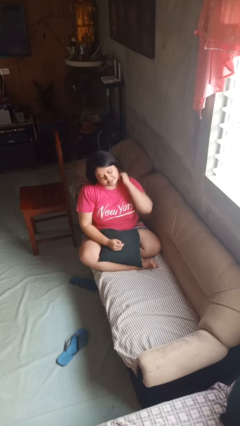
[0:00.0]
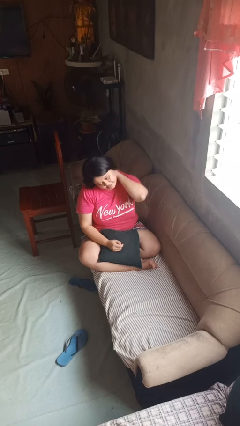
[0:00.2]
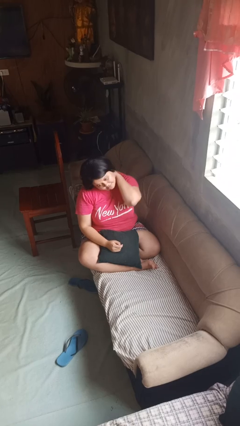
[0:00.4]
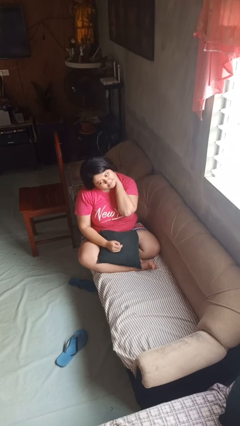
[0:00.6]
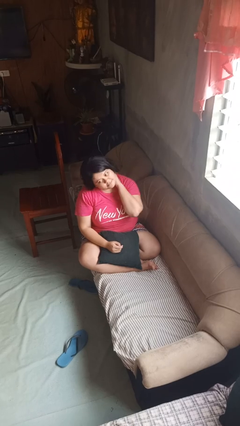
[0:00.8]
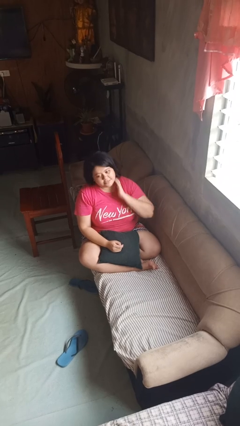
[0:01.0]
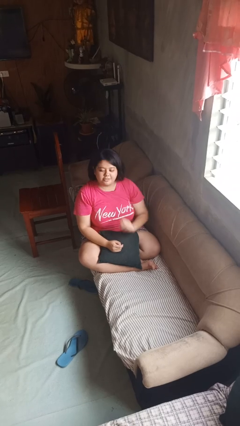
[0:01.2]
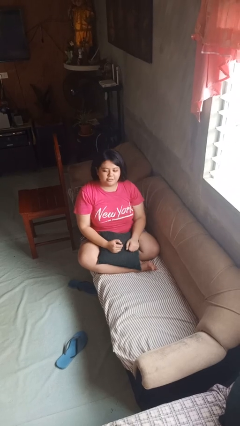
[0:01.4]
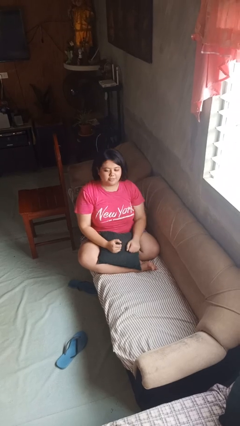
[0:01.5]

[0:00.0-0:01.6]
person rubs neck

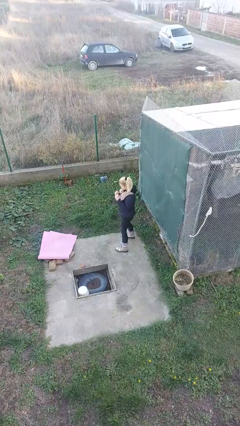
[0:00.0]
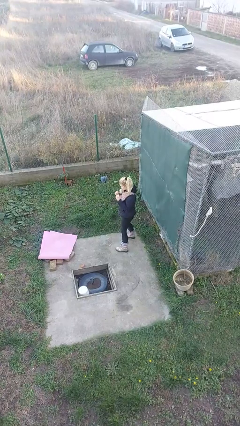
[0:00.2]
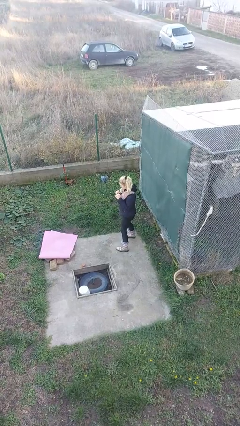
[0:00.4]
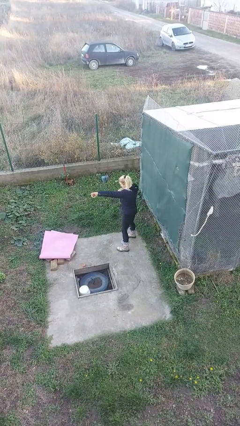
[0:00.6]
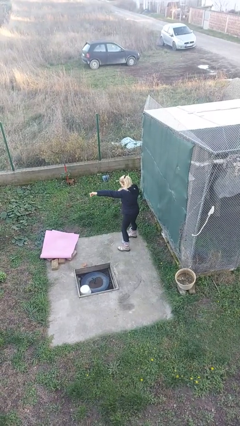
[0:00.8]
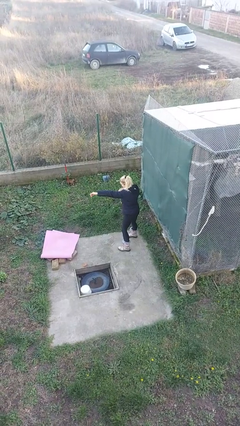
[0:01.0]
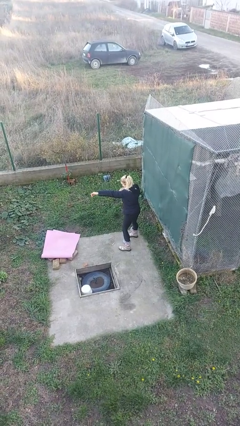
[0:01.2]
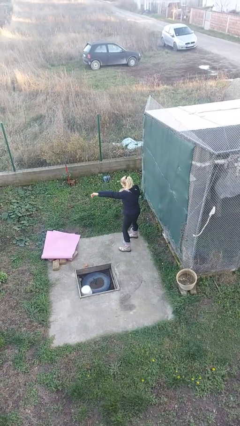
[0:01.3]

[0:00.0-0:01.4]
person punches

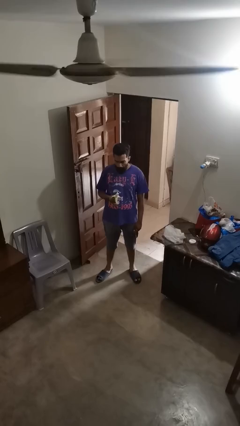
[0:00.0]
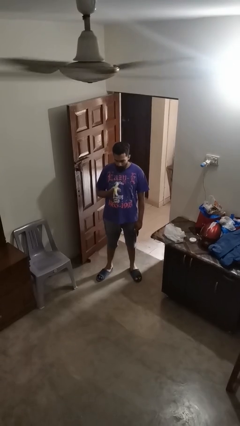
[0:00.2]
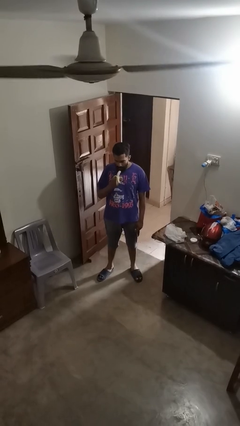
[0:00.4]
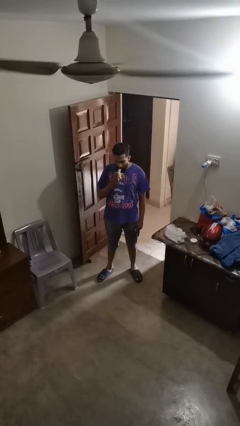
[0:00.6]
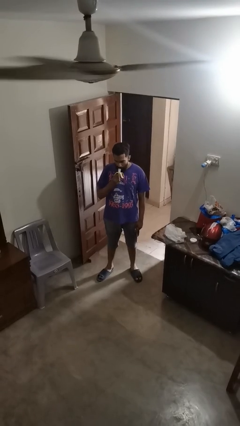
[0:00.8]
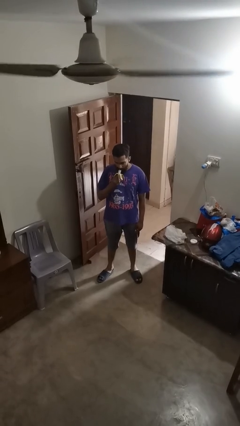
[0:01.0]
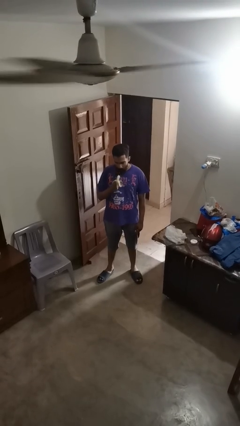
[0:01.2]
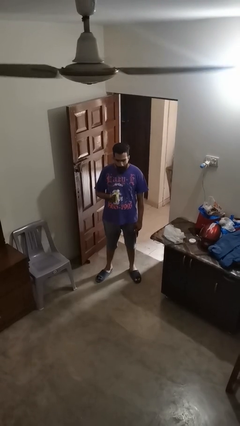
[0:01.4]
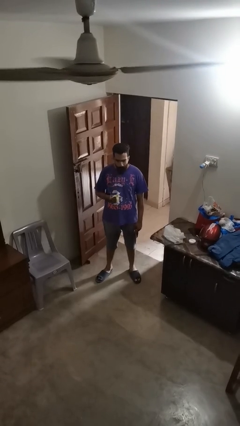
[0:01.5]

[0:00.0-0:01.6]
person eats banana

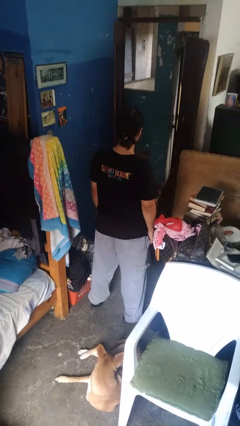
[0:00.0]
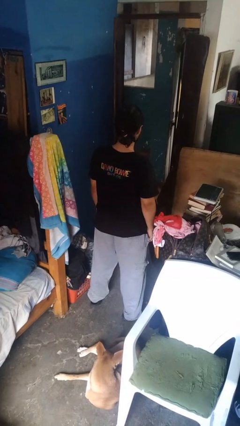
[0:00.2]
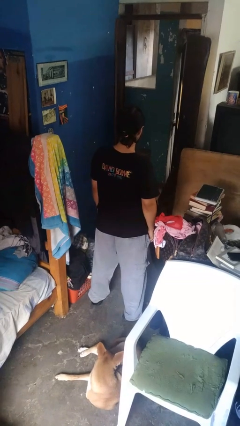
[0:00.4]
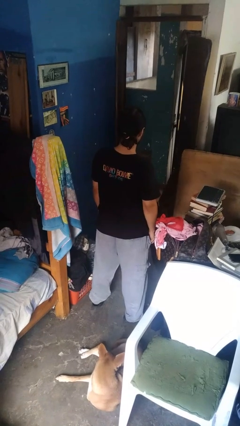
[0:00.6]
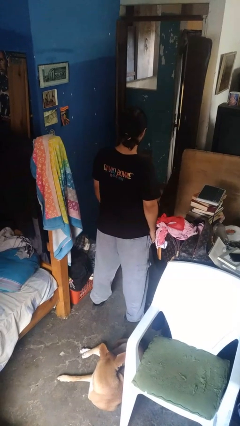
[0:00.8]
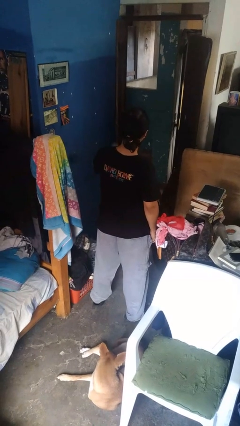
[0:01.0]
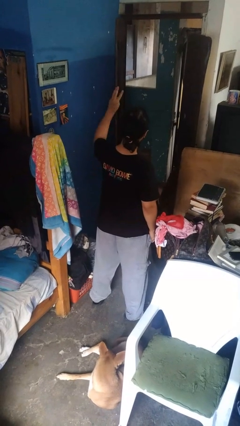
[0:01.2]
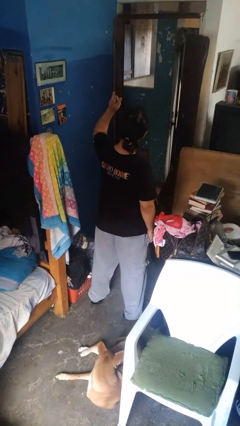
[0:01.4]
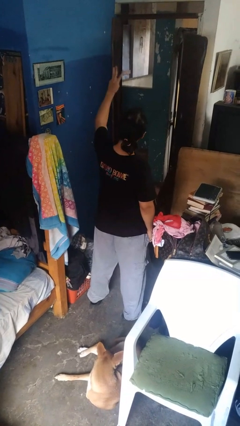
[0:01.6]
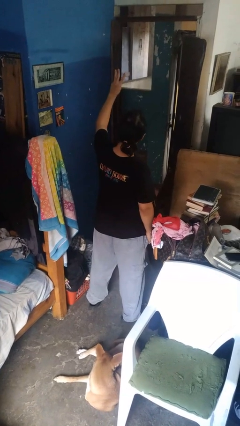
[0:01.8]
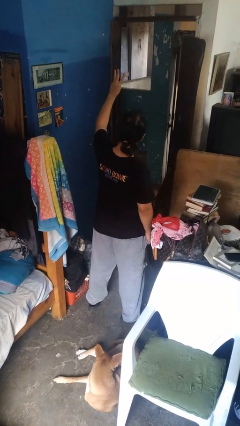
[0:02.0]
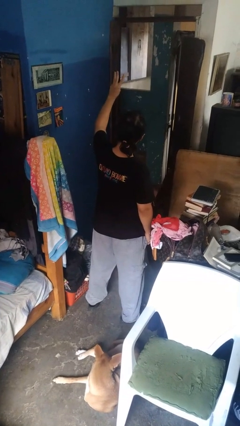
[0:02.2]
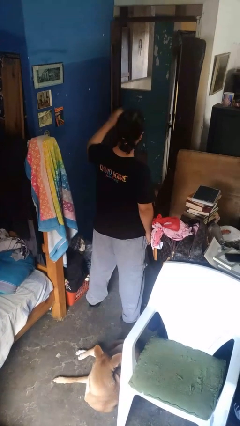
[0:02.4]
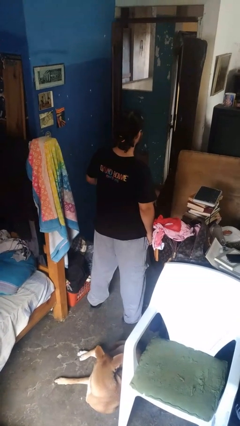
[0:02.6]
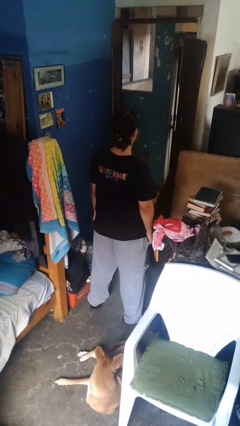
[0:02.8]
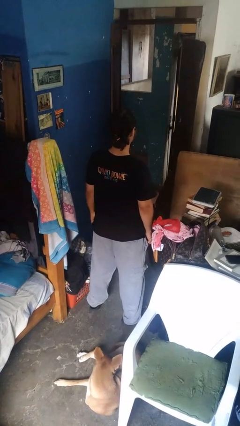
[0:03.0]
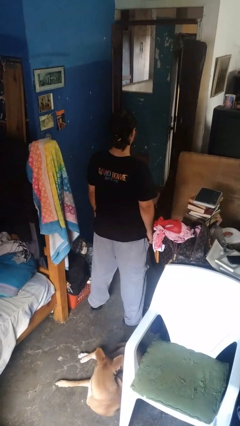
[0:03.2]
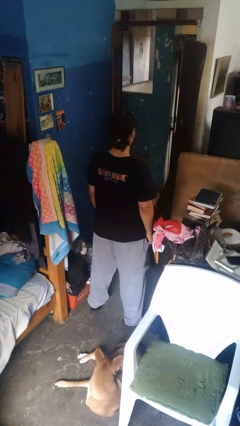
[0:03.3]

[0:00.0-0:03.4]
person gestures number three

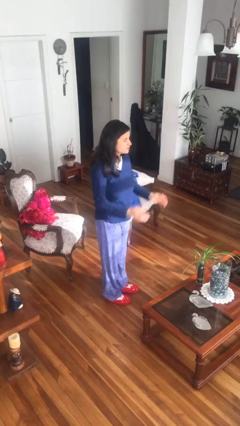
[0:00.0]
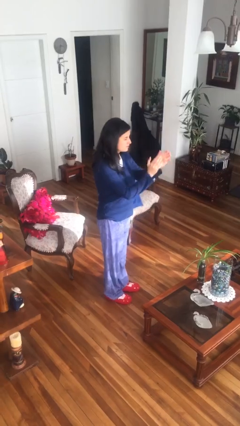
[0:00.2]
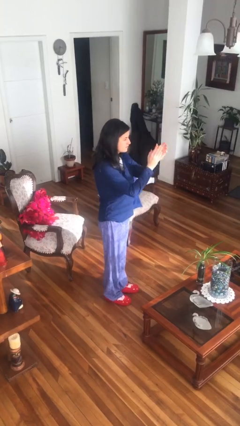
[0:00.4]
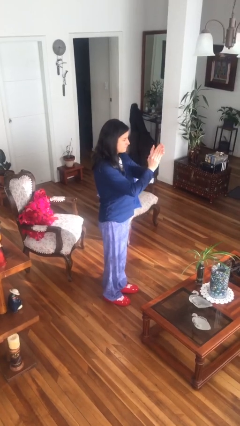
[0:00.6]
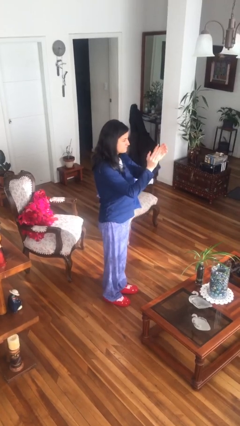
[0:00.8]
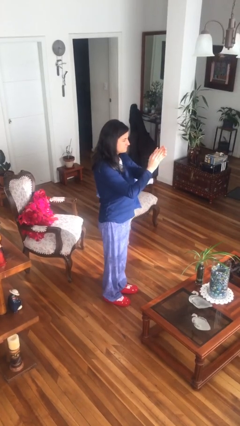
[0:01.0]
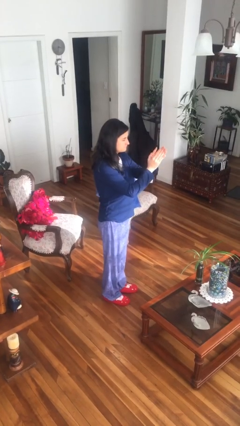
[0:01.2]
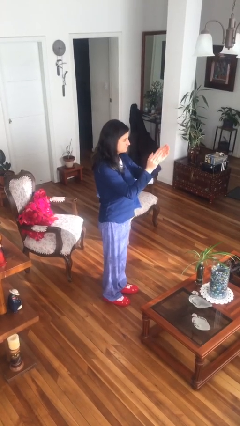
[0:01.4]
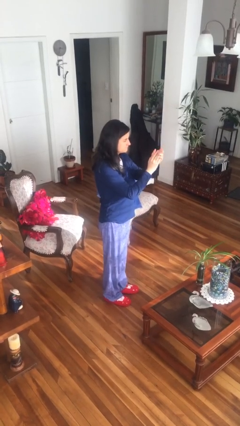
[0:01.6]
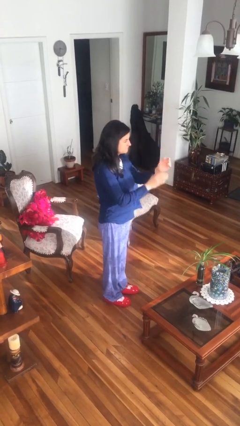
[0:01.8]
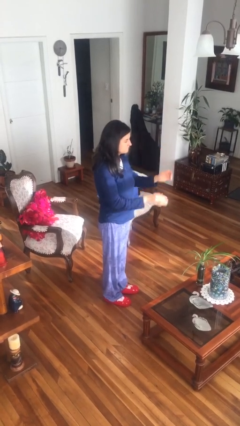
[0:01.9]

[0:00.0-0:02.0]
person claps hands

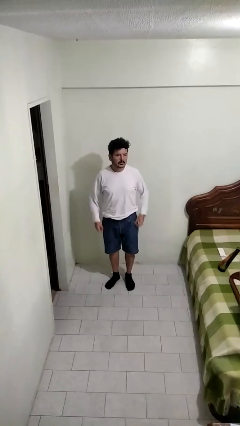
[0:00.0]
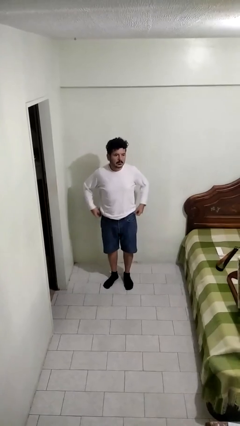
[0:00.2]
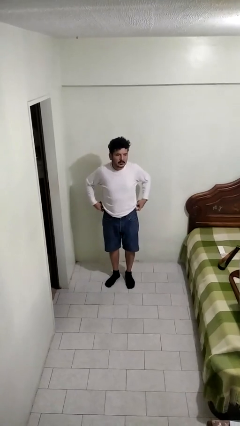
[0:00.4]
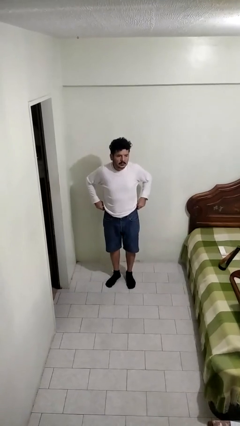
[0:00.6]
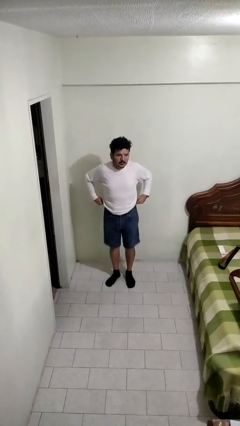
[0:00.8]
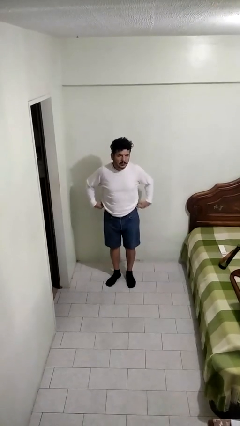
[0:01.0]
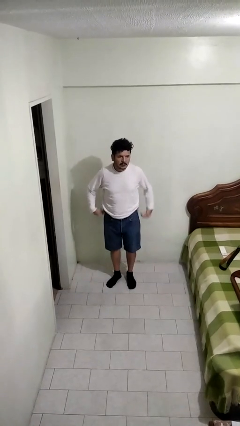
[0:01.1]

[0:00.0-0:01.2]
person hikes up pants

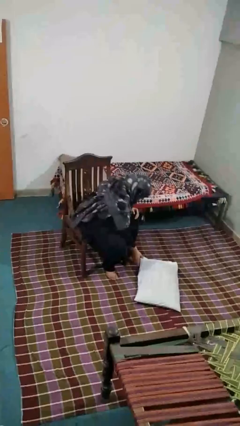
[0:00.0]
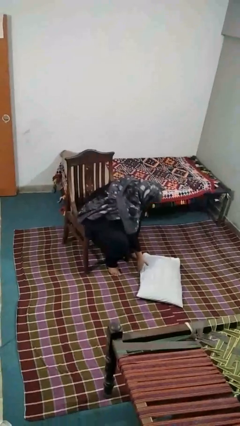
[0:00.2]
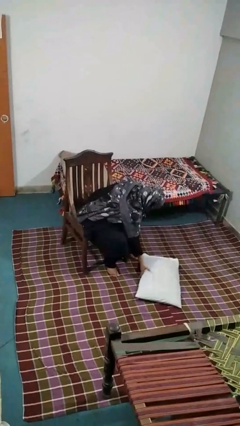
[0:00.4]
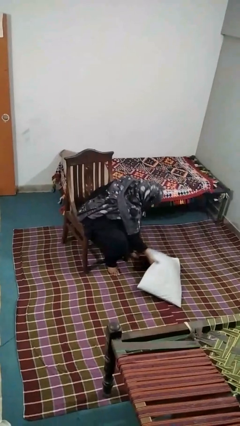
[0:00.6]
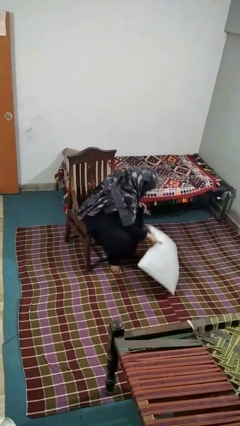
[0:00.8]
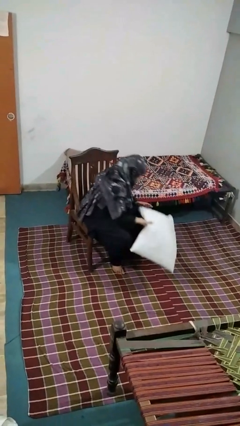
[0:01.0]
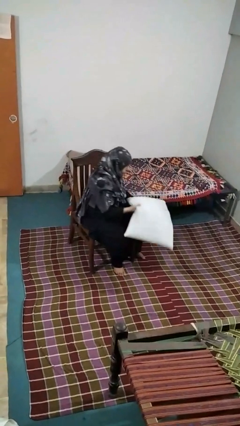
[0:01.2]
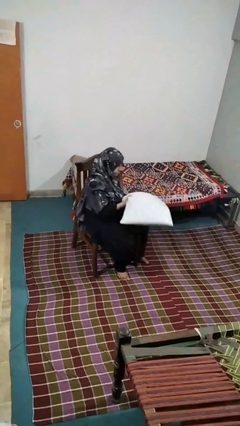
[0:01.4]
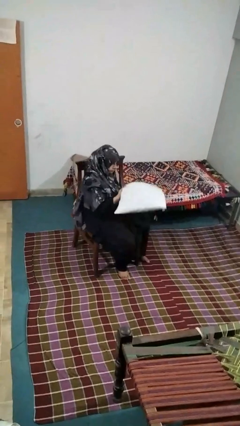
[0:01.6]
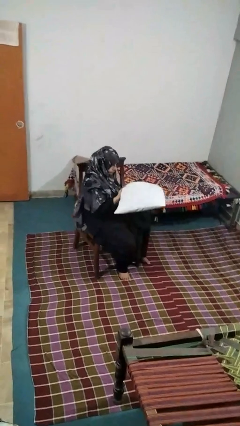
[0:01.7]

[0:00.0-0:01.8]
person picks up object from floor

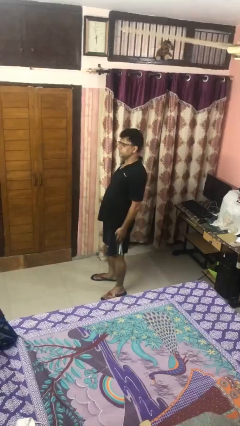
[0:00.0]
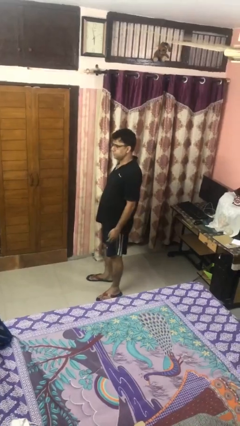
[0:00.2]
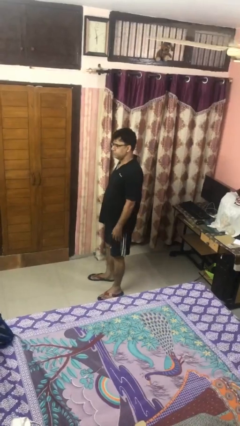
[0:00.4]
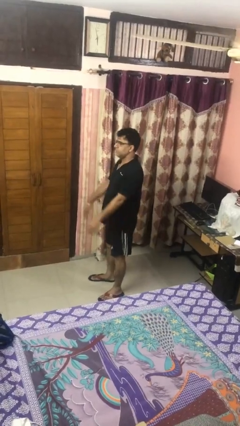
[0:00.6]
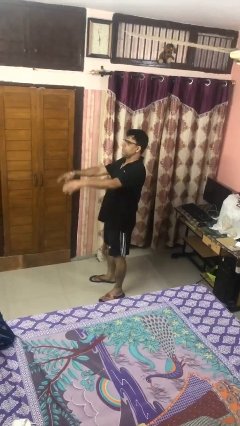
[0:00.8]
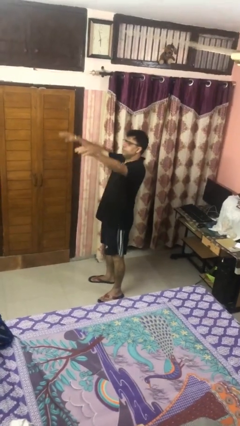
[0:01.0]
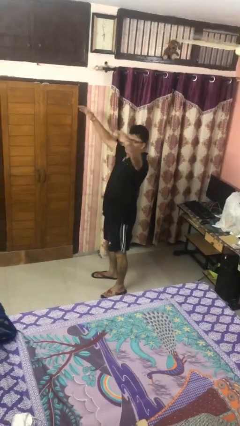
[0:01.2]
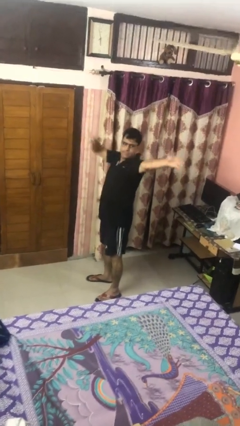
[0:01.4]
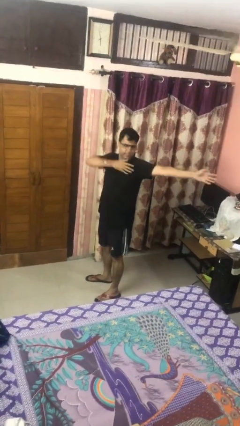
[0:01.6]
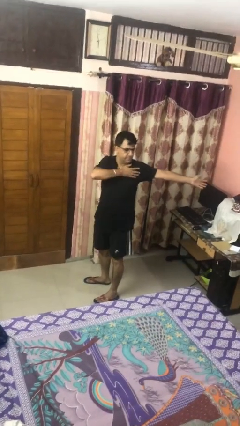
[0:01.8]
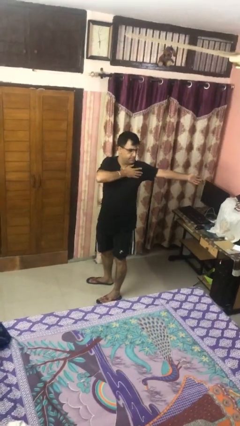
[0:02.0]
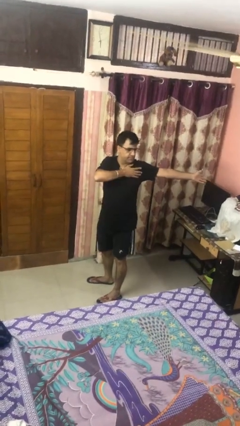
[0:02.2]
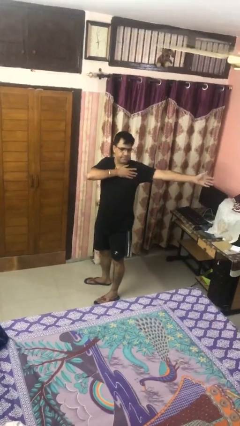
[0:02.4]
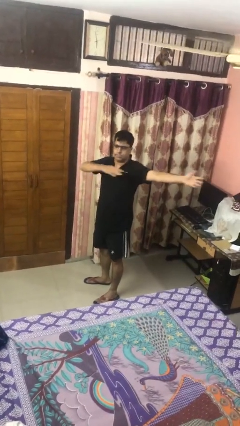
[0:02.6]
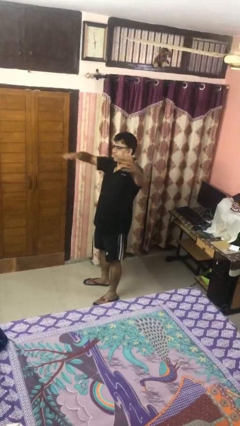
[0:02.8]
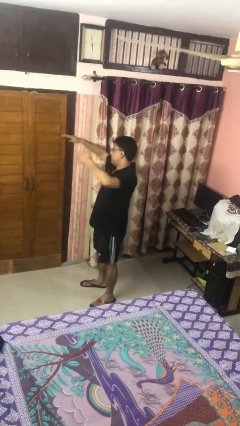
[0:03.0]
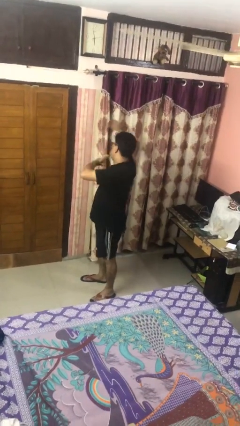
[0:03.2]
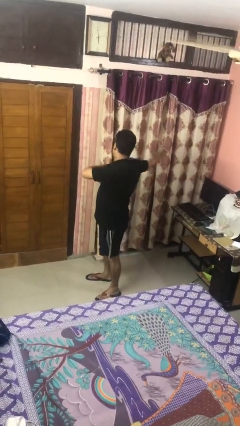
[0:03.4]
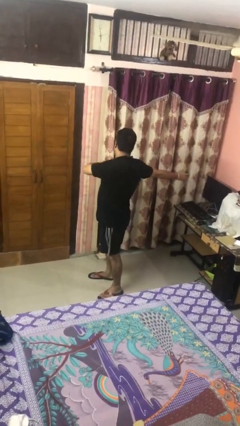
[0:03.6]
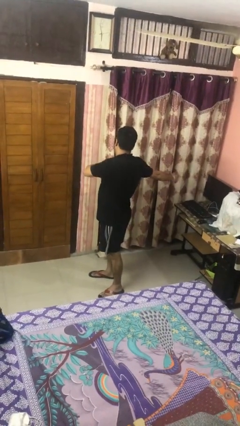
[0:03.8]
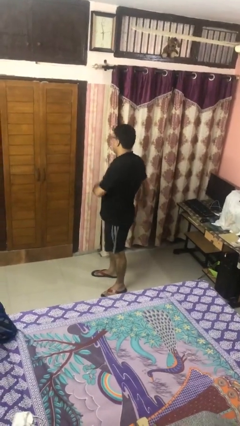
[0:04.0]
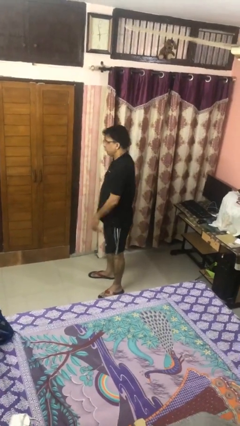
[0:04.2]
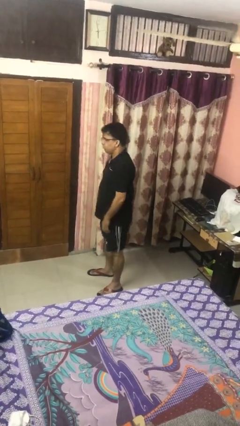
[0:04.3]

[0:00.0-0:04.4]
person stretches arms to side
